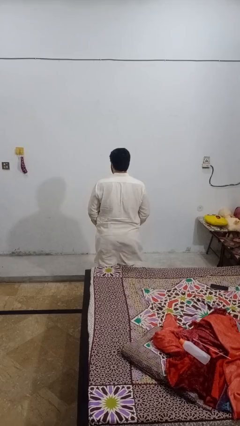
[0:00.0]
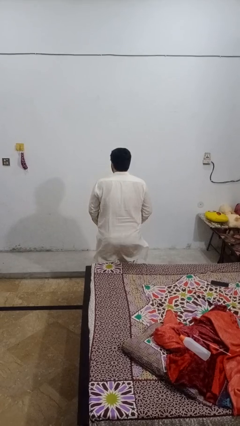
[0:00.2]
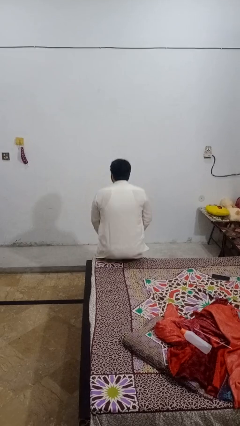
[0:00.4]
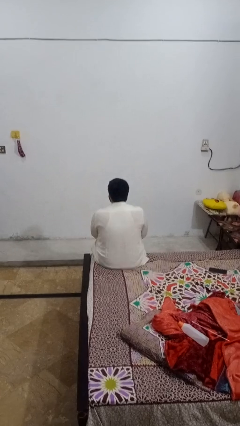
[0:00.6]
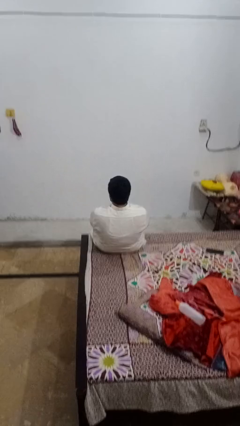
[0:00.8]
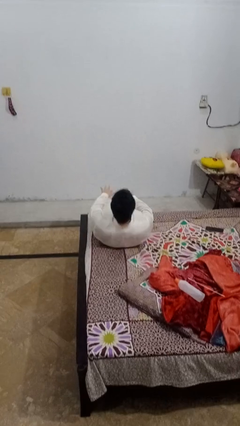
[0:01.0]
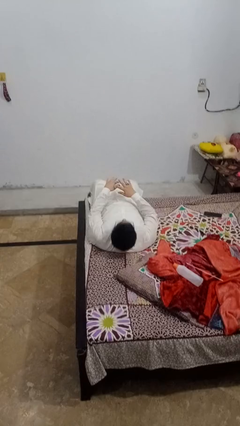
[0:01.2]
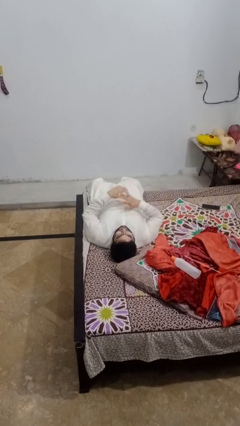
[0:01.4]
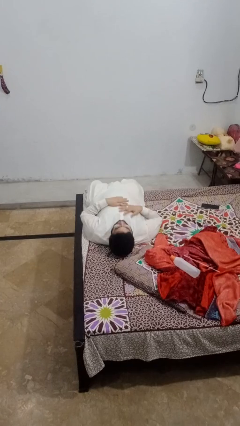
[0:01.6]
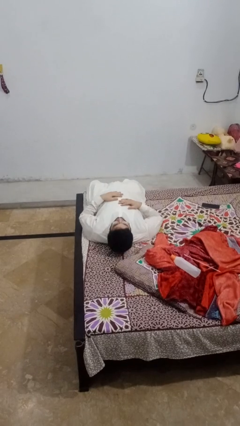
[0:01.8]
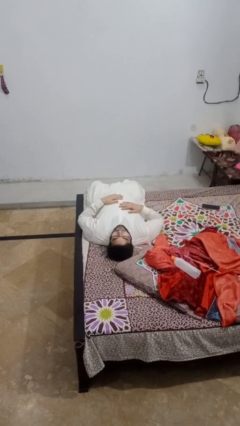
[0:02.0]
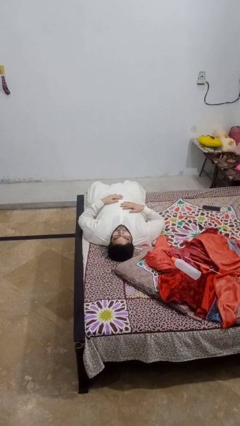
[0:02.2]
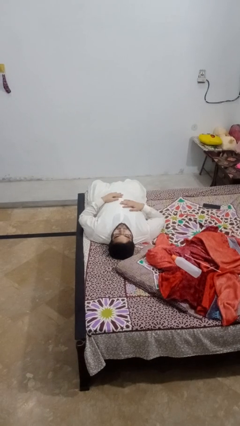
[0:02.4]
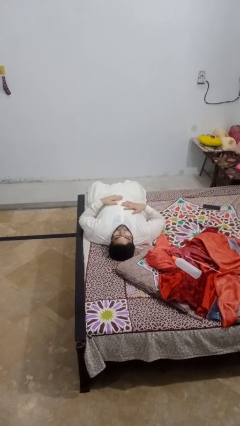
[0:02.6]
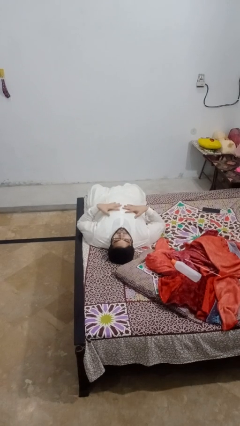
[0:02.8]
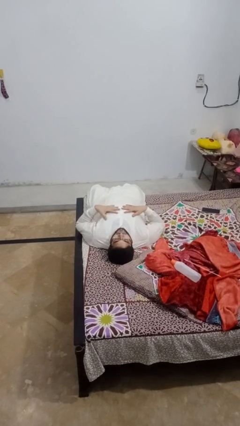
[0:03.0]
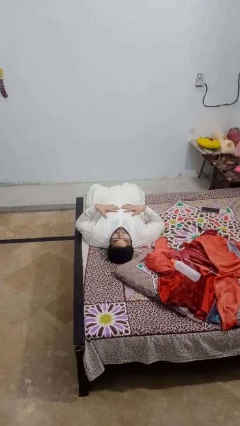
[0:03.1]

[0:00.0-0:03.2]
person lies down on bed

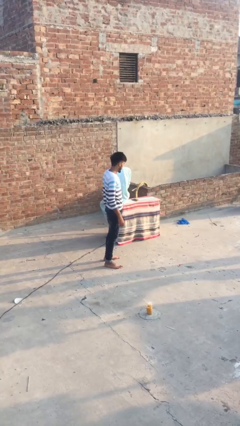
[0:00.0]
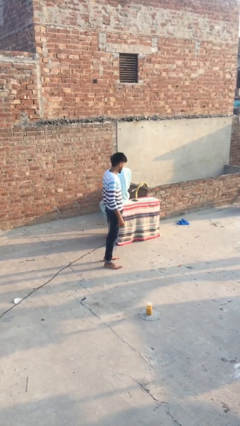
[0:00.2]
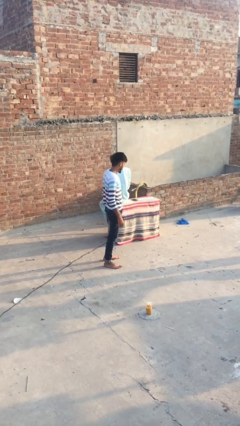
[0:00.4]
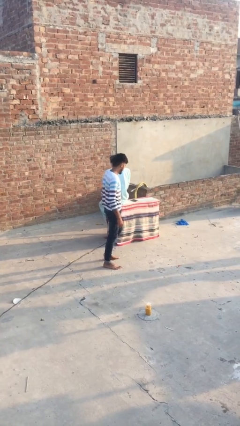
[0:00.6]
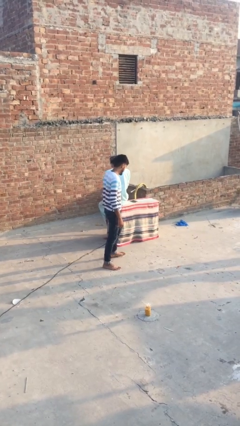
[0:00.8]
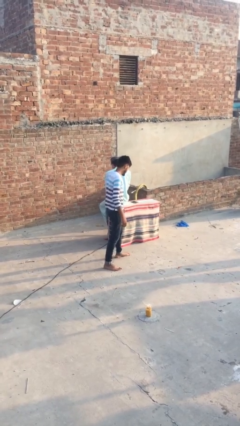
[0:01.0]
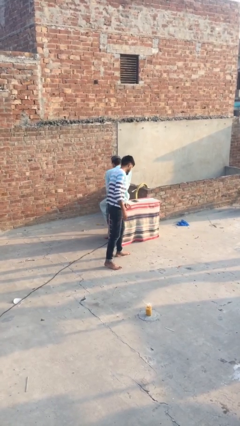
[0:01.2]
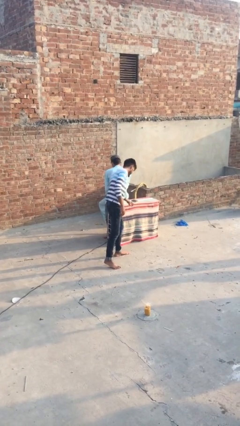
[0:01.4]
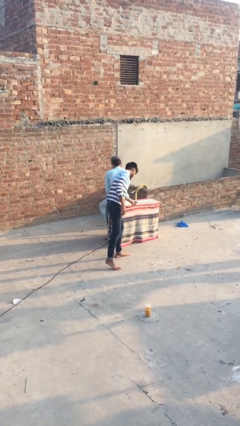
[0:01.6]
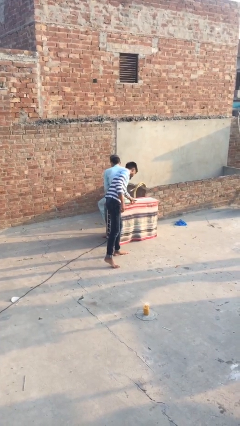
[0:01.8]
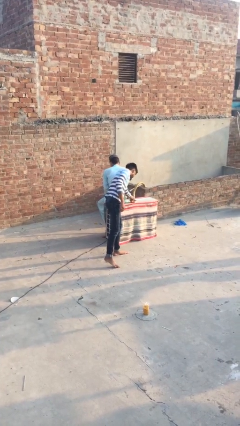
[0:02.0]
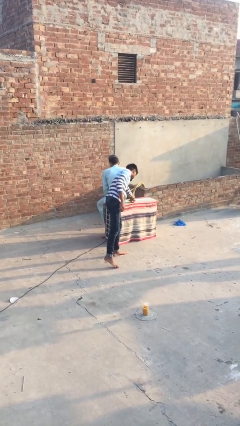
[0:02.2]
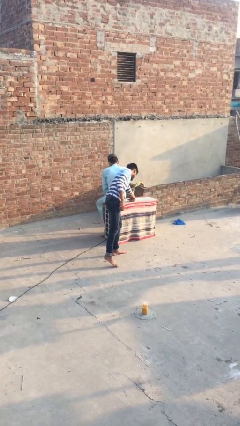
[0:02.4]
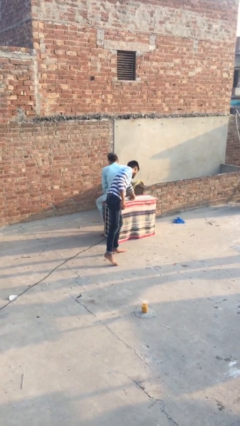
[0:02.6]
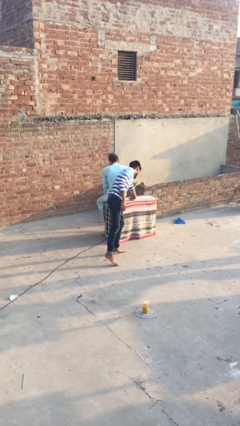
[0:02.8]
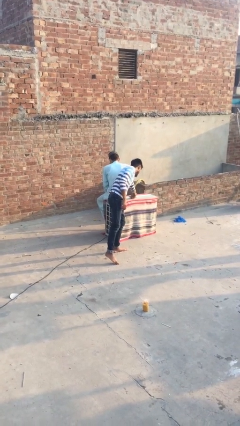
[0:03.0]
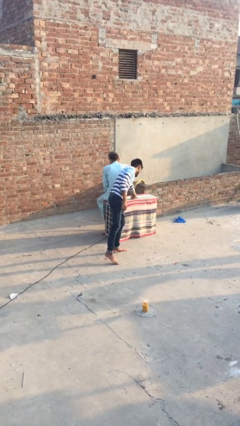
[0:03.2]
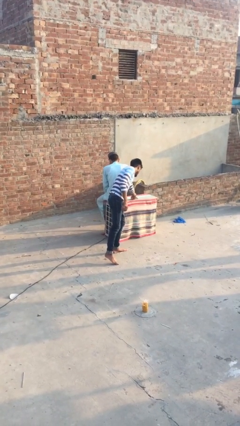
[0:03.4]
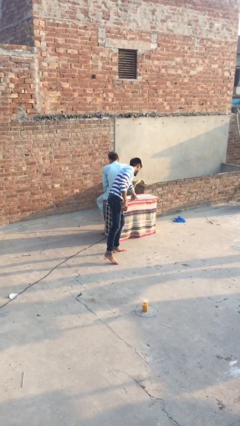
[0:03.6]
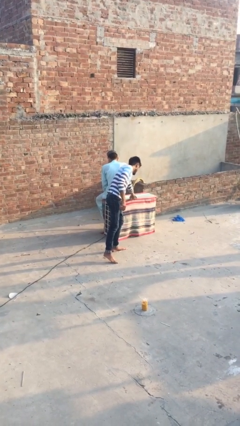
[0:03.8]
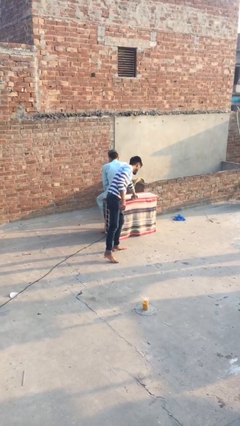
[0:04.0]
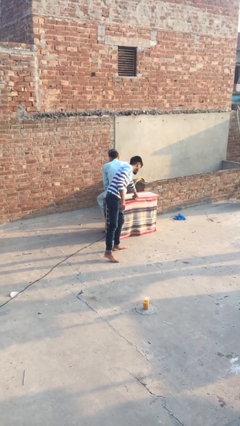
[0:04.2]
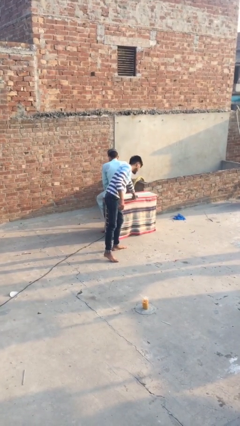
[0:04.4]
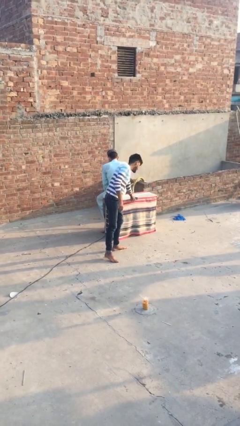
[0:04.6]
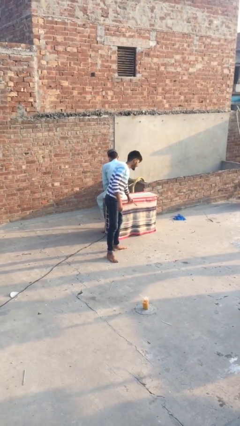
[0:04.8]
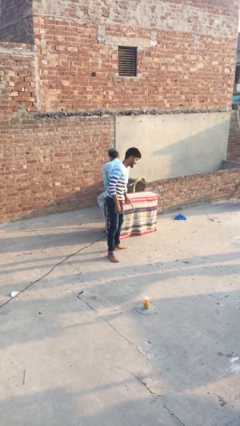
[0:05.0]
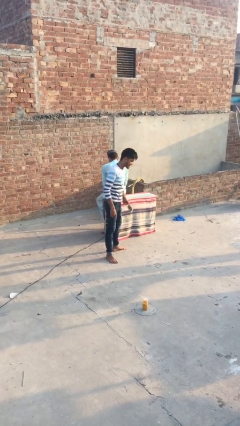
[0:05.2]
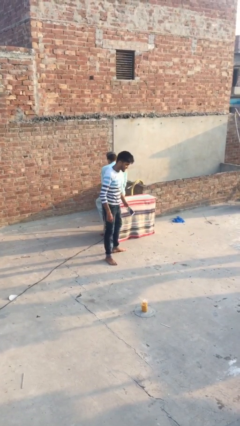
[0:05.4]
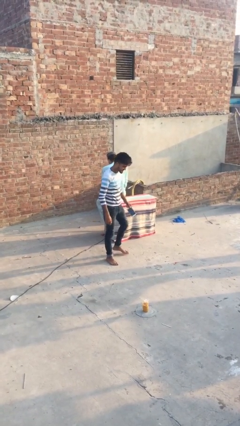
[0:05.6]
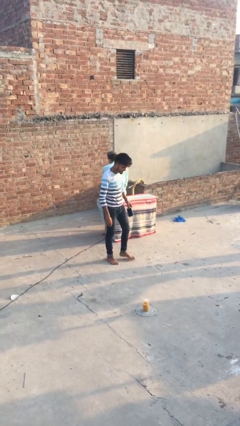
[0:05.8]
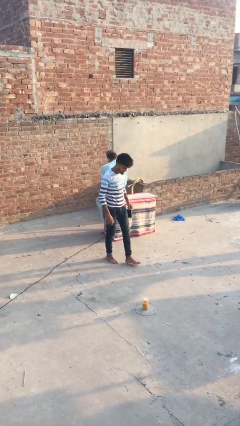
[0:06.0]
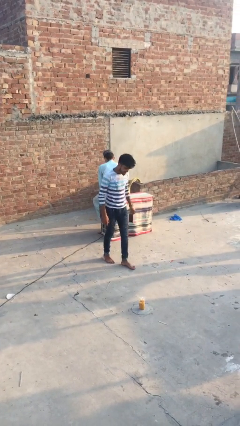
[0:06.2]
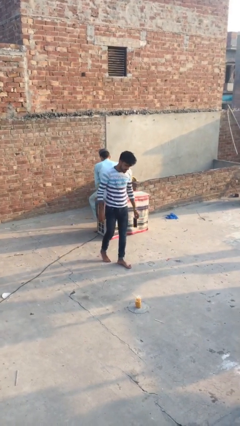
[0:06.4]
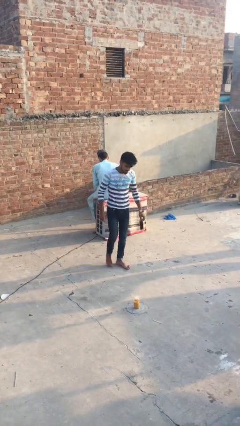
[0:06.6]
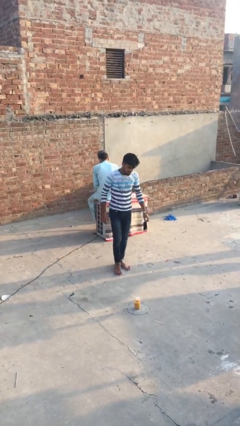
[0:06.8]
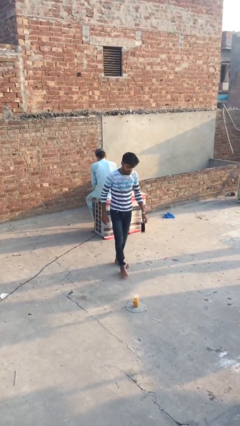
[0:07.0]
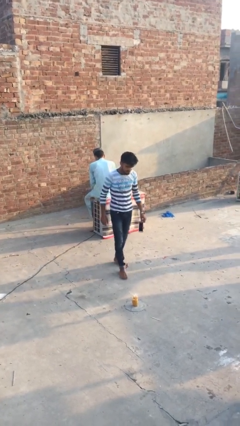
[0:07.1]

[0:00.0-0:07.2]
person steals object from person

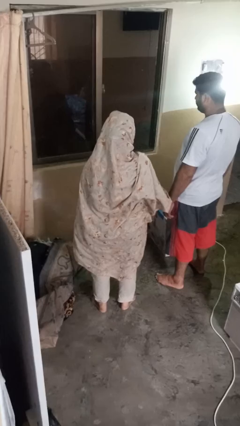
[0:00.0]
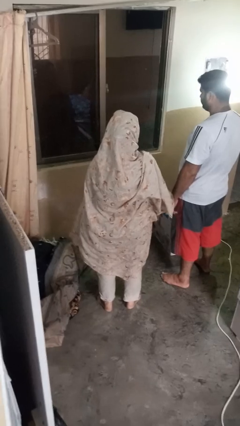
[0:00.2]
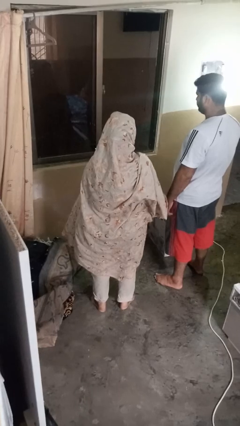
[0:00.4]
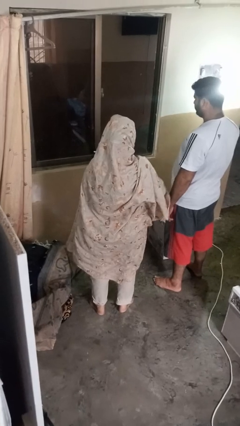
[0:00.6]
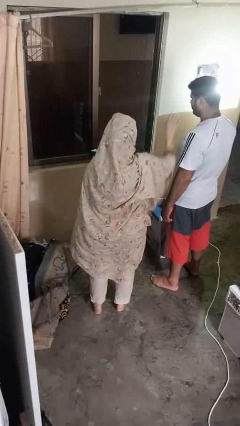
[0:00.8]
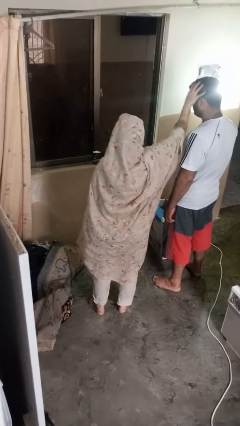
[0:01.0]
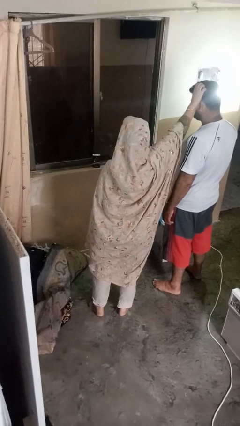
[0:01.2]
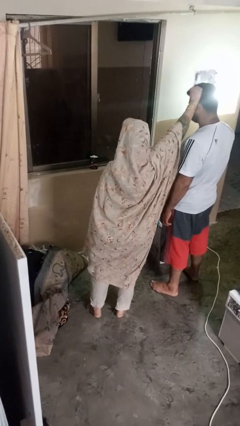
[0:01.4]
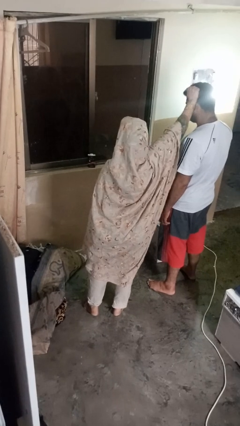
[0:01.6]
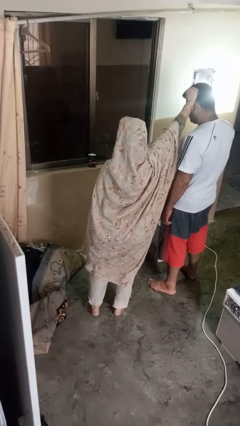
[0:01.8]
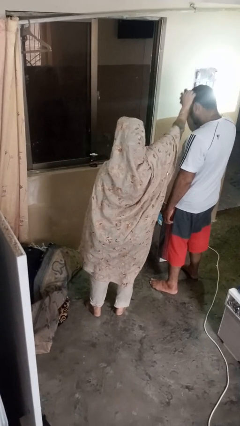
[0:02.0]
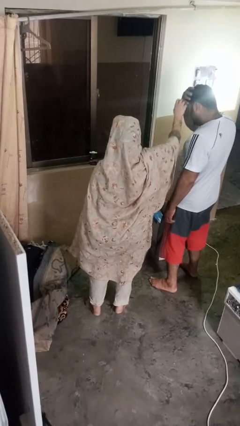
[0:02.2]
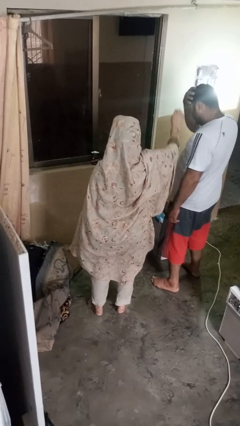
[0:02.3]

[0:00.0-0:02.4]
person grabs person by hair

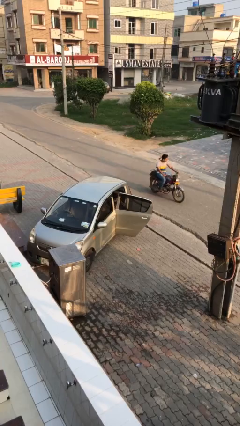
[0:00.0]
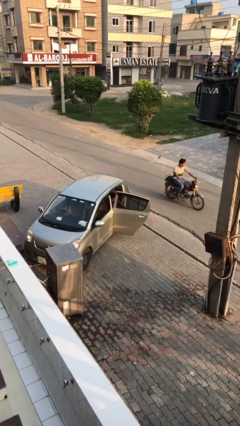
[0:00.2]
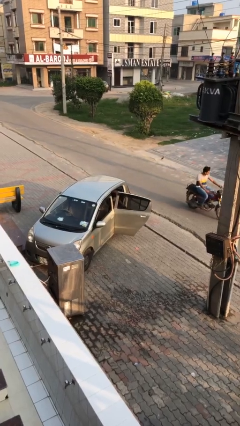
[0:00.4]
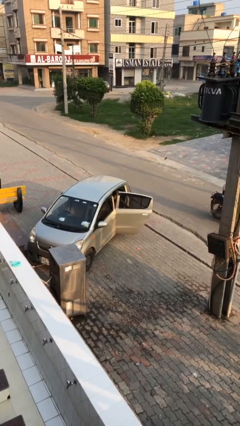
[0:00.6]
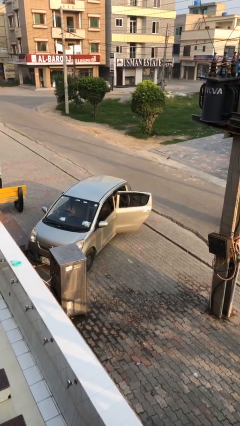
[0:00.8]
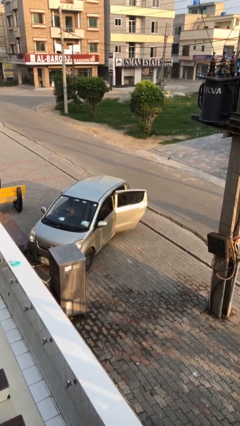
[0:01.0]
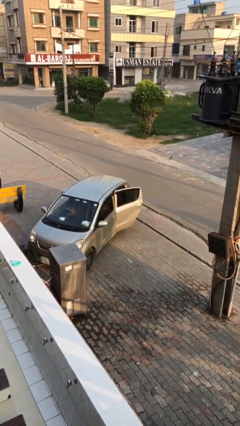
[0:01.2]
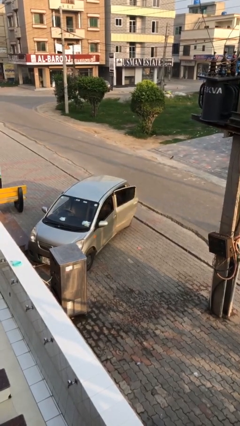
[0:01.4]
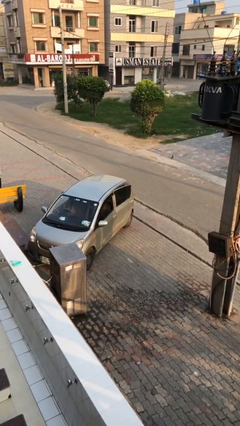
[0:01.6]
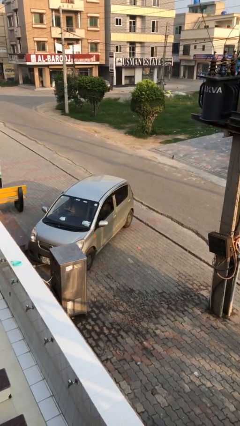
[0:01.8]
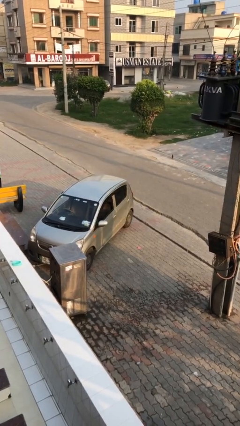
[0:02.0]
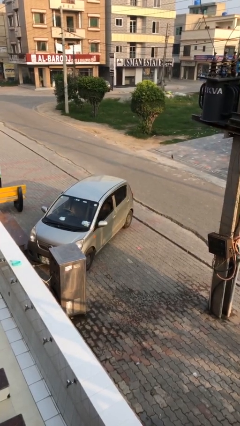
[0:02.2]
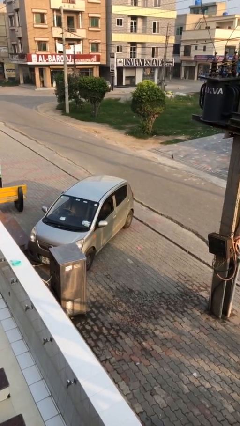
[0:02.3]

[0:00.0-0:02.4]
person closes car door

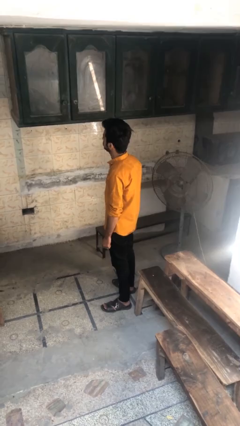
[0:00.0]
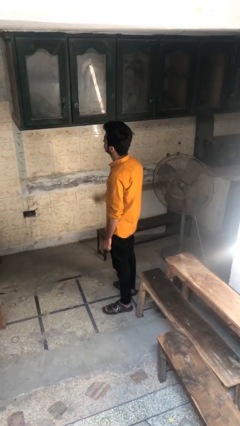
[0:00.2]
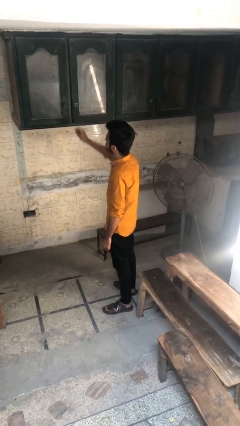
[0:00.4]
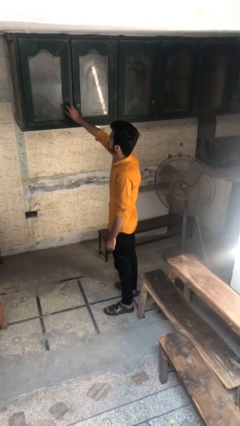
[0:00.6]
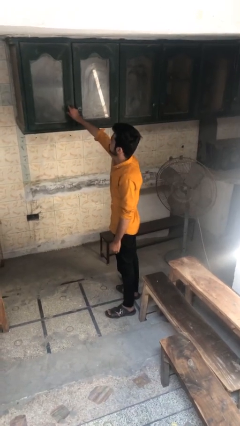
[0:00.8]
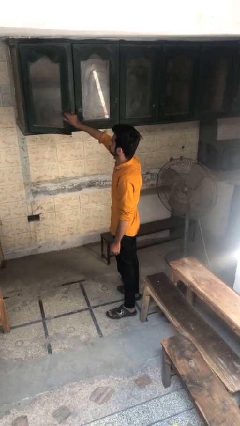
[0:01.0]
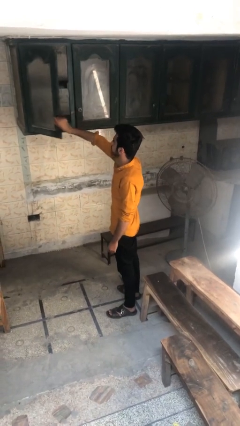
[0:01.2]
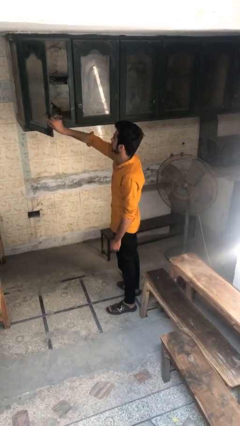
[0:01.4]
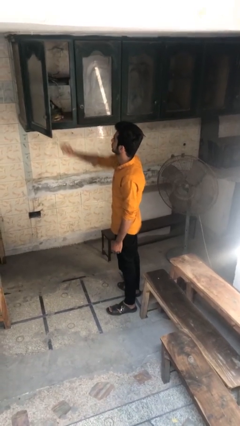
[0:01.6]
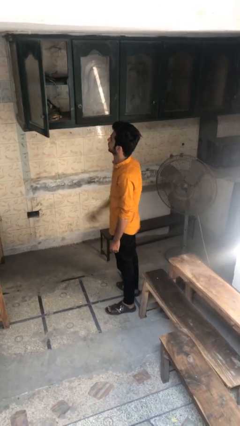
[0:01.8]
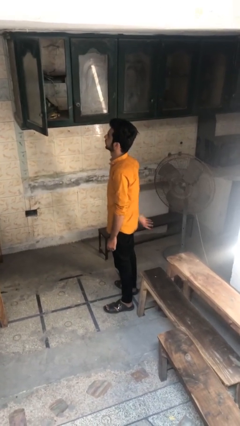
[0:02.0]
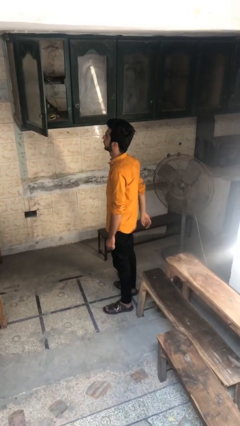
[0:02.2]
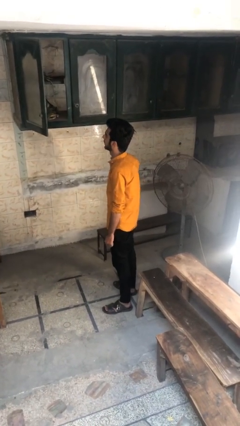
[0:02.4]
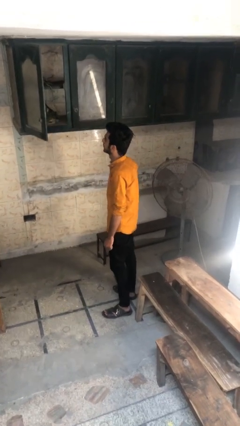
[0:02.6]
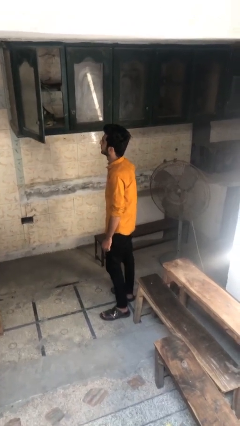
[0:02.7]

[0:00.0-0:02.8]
person opens cabinet

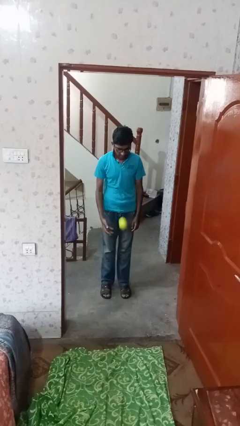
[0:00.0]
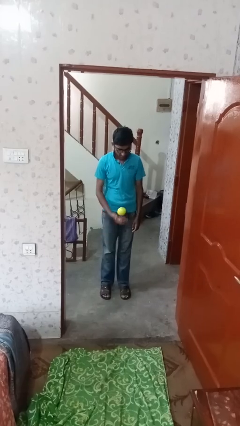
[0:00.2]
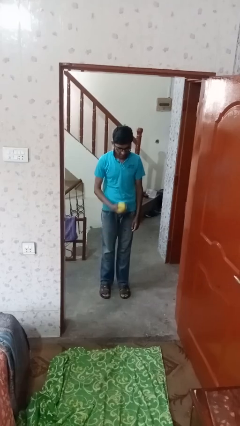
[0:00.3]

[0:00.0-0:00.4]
person bounces ball on floor
